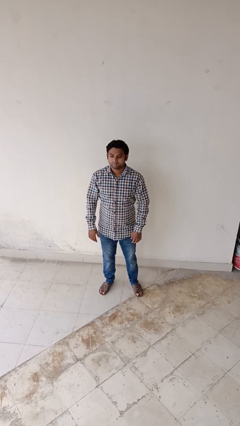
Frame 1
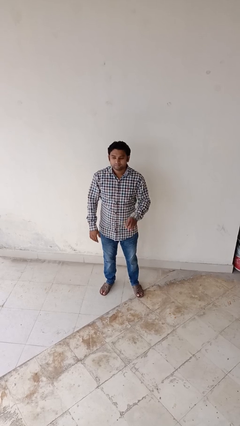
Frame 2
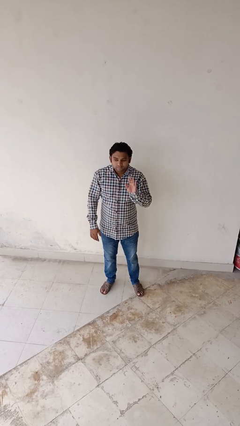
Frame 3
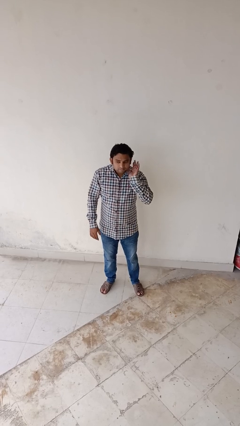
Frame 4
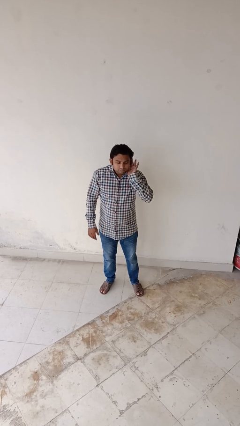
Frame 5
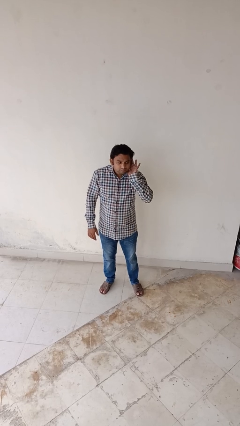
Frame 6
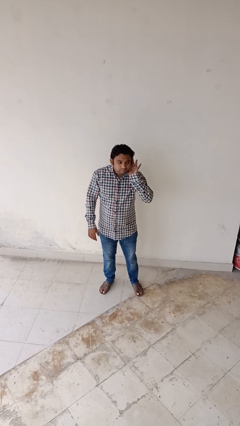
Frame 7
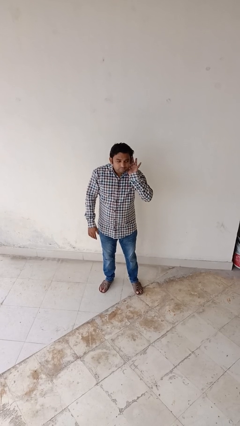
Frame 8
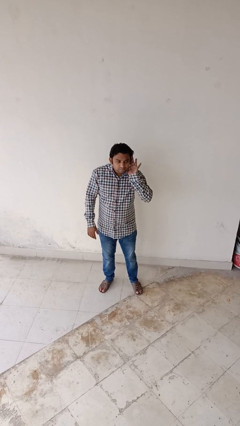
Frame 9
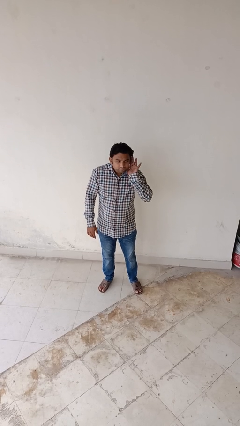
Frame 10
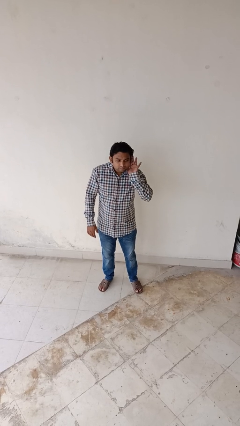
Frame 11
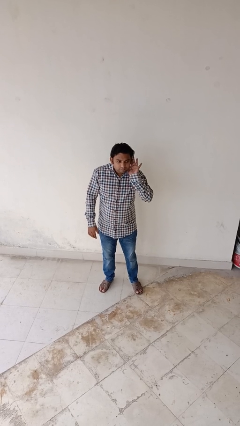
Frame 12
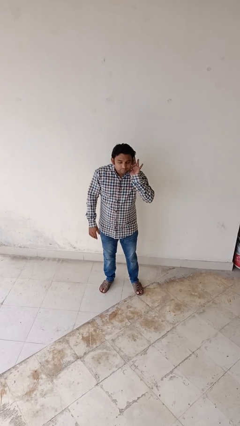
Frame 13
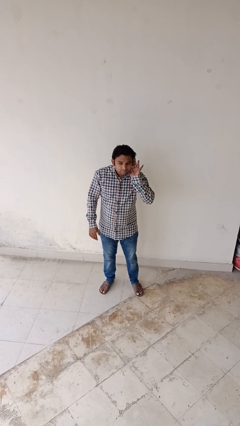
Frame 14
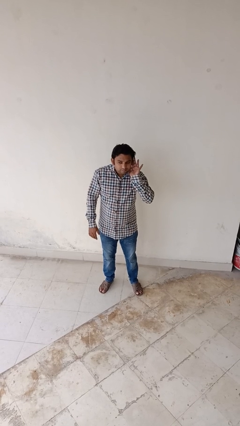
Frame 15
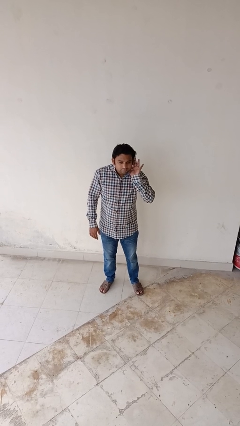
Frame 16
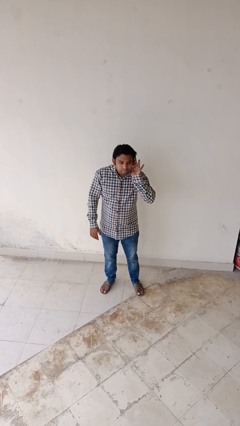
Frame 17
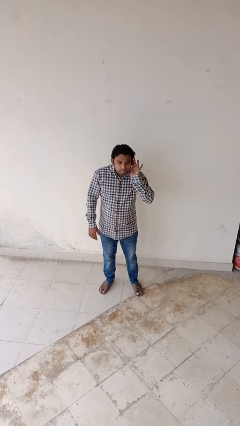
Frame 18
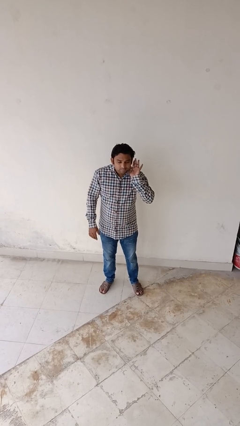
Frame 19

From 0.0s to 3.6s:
person gestures listen closely

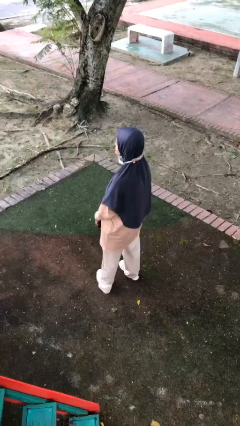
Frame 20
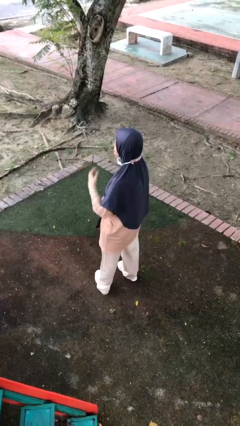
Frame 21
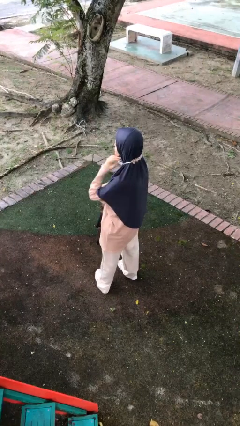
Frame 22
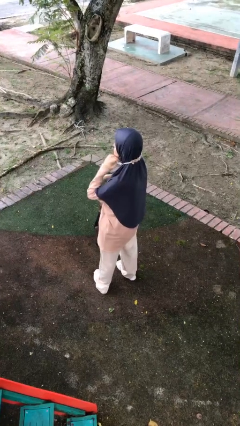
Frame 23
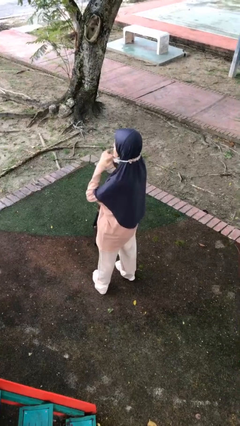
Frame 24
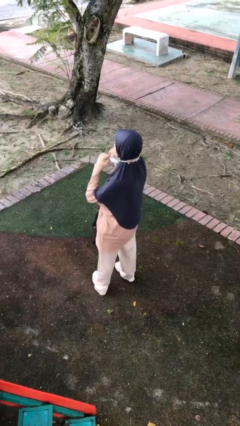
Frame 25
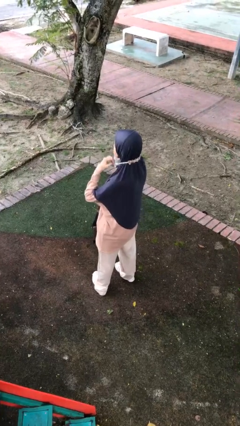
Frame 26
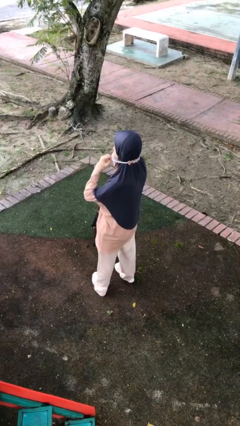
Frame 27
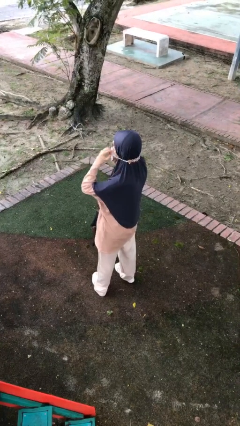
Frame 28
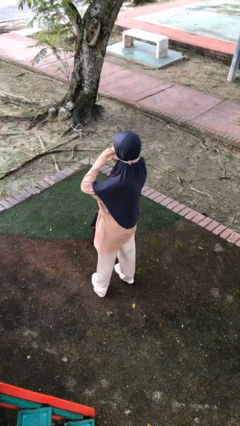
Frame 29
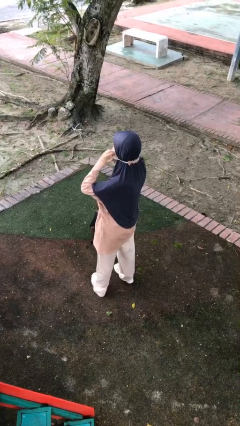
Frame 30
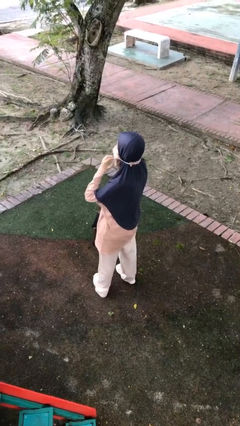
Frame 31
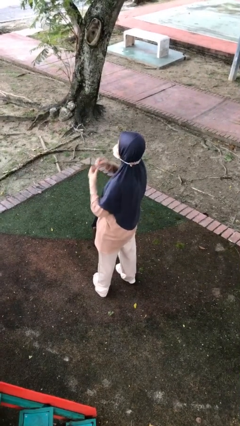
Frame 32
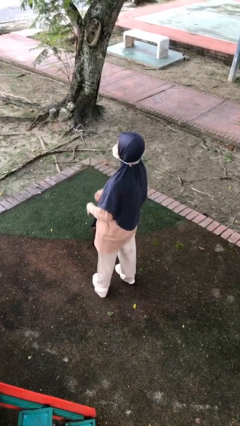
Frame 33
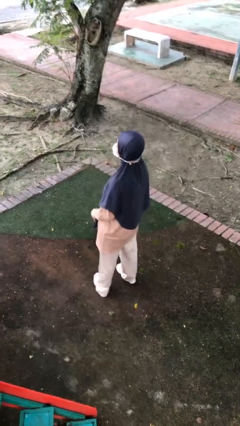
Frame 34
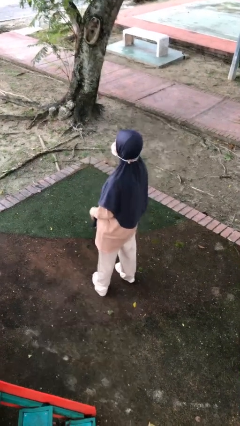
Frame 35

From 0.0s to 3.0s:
person puts on facemask

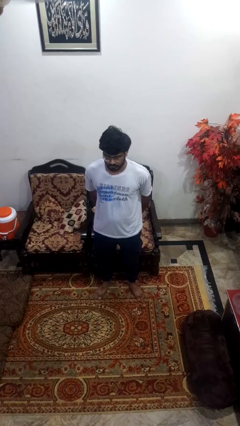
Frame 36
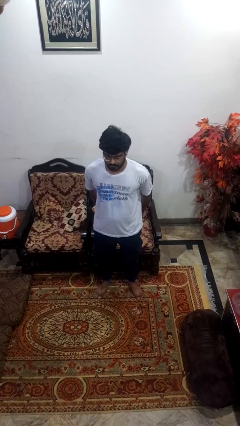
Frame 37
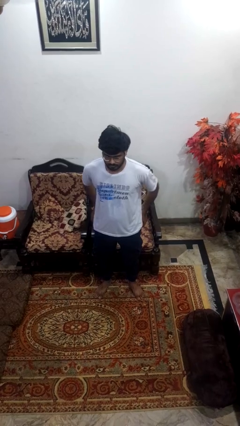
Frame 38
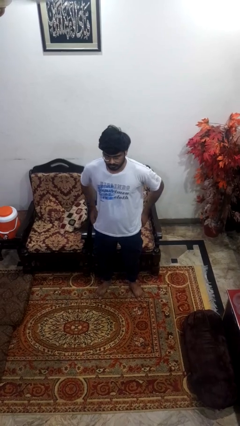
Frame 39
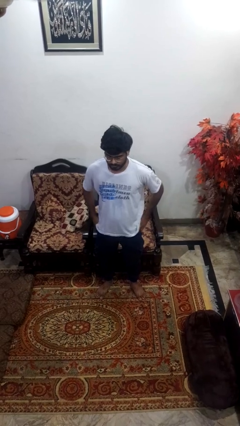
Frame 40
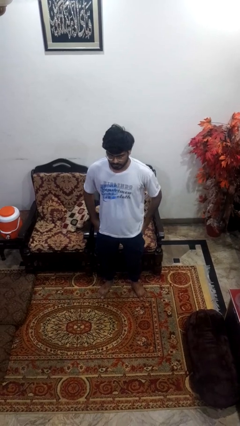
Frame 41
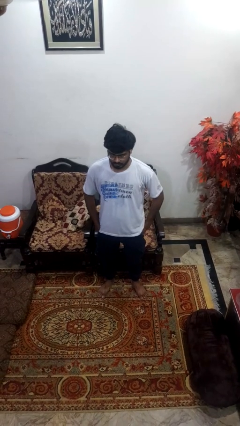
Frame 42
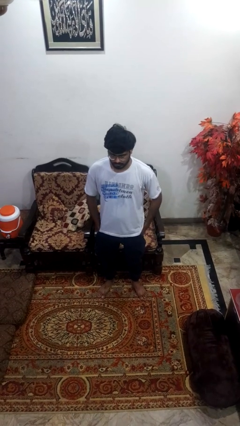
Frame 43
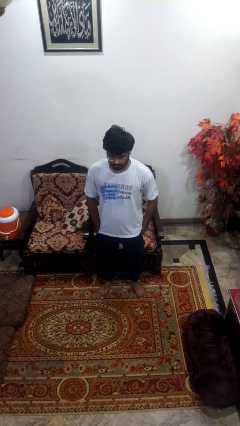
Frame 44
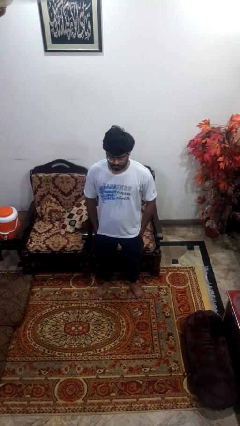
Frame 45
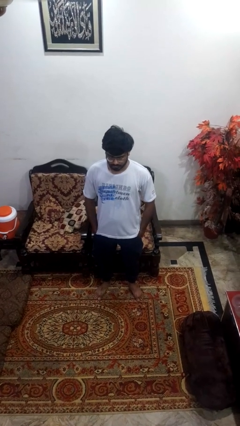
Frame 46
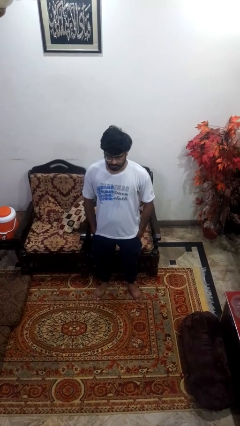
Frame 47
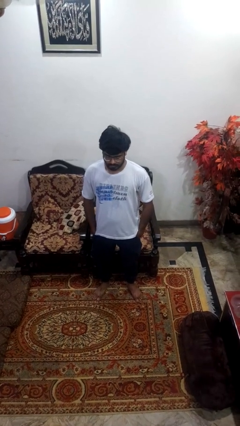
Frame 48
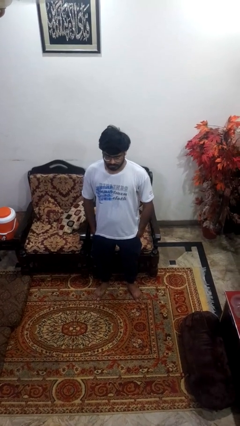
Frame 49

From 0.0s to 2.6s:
person puts hands in back pockets

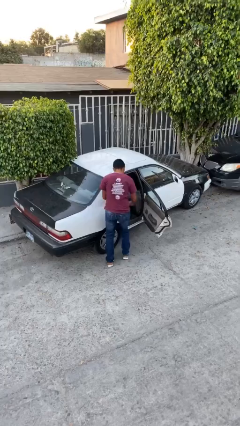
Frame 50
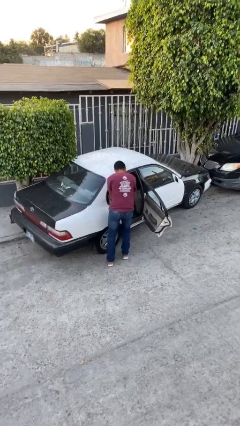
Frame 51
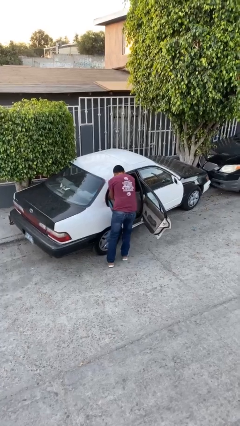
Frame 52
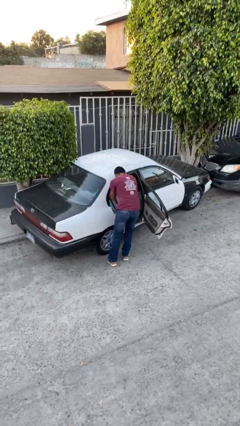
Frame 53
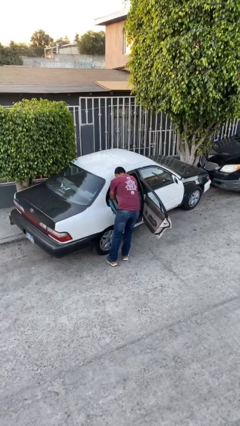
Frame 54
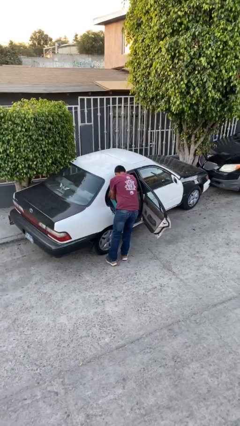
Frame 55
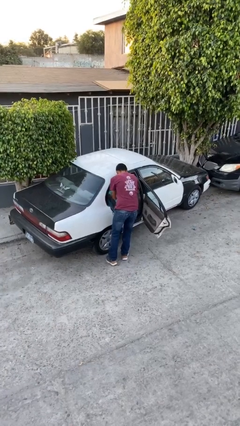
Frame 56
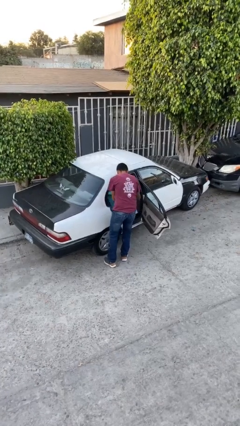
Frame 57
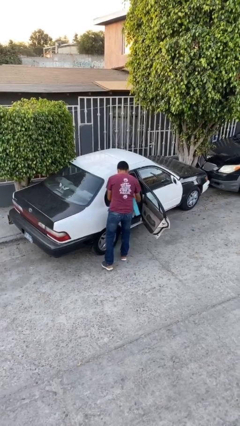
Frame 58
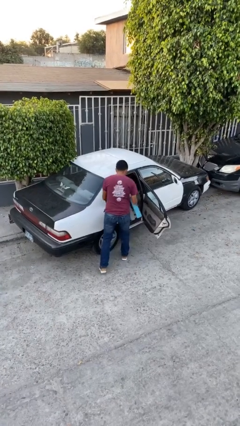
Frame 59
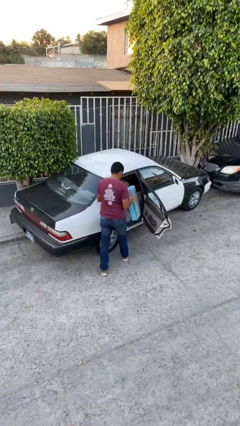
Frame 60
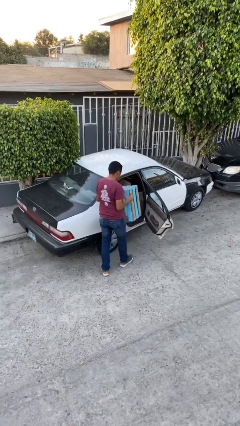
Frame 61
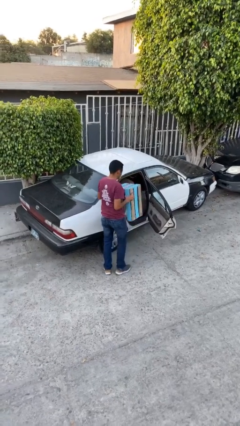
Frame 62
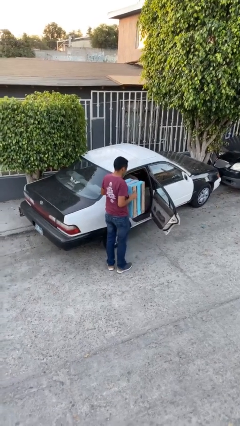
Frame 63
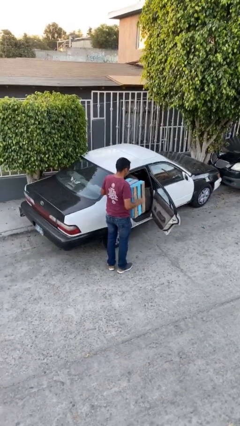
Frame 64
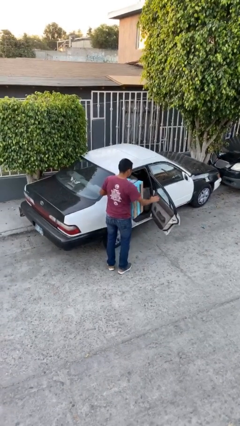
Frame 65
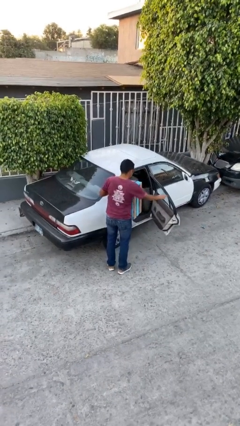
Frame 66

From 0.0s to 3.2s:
person unloads car

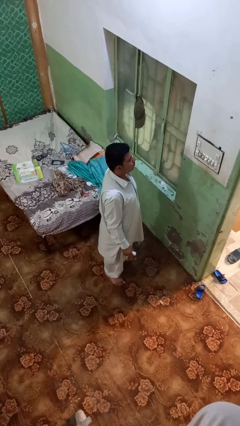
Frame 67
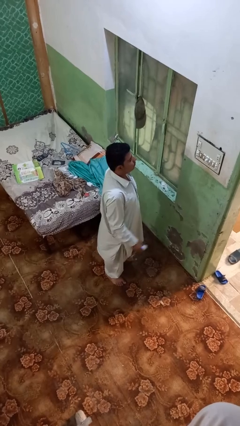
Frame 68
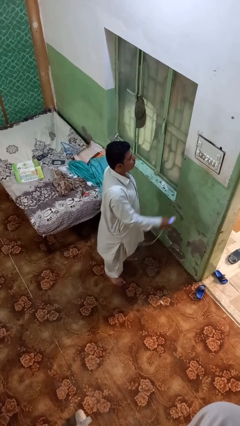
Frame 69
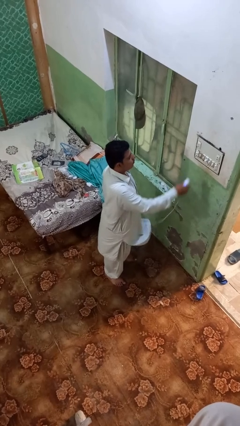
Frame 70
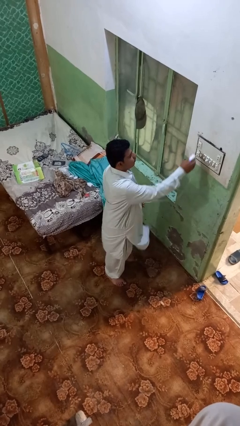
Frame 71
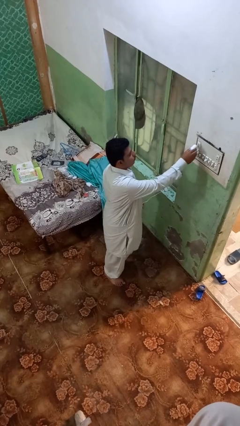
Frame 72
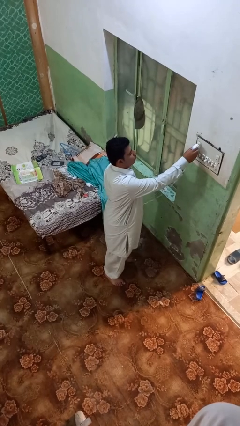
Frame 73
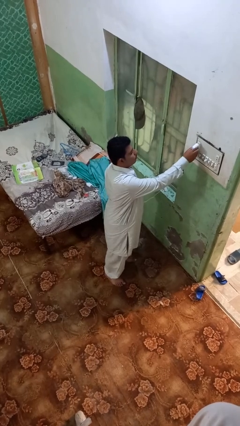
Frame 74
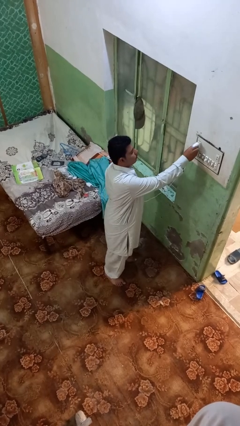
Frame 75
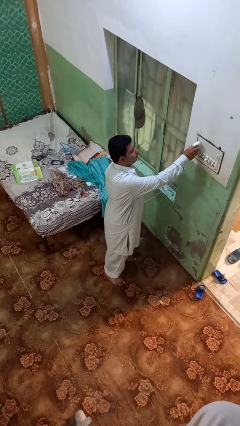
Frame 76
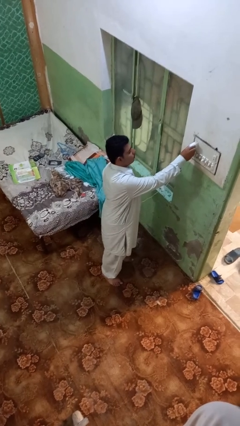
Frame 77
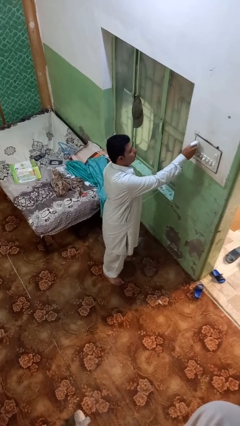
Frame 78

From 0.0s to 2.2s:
person plugs into electrical socket

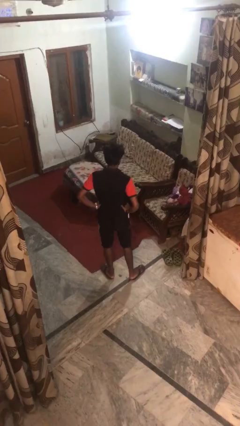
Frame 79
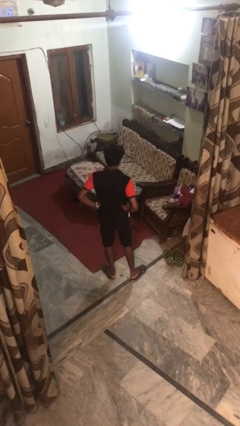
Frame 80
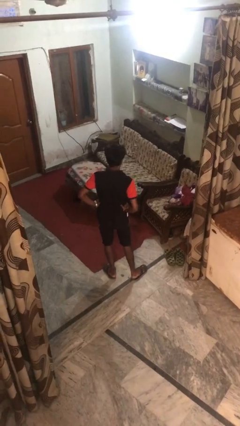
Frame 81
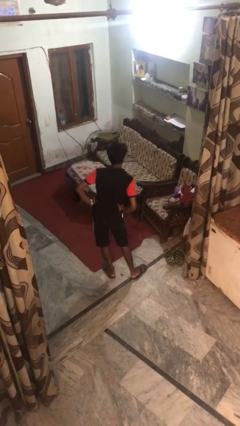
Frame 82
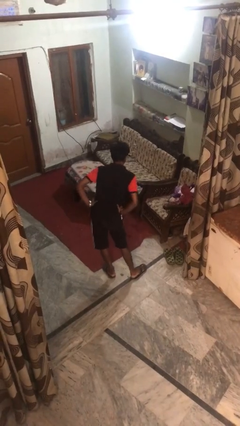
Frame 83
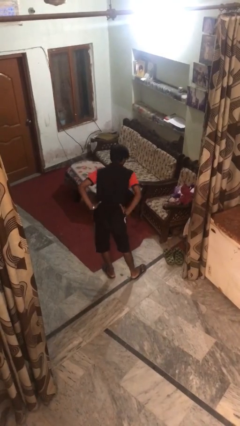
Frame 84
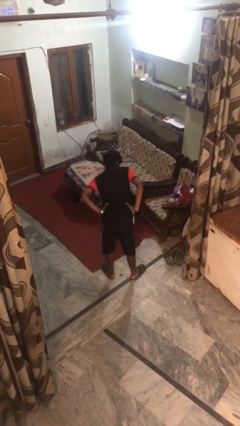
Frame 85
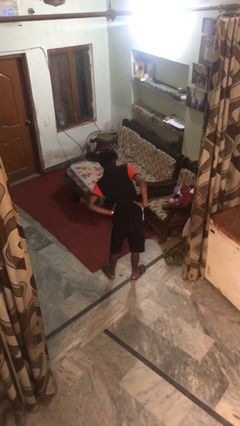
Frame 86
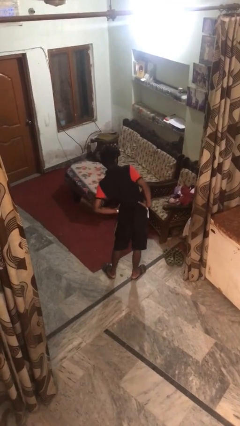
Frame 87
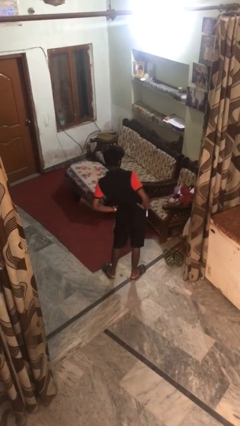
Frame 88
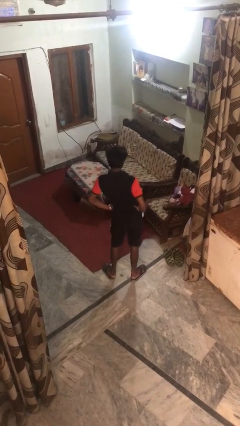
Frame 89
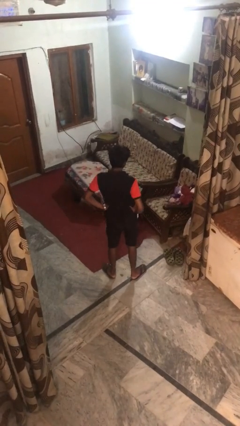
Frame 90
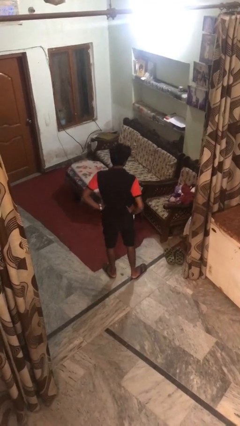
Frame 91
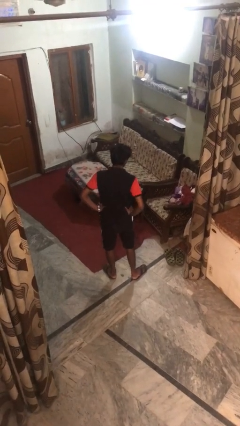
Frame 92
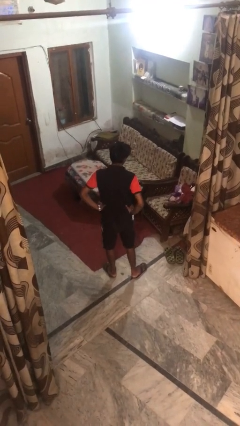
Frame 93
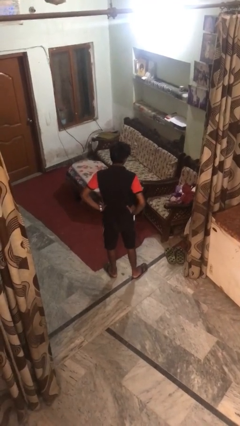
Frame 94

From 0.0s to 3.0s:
person wiggles hips
